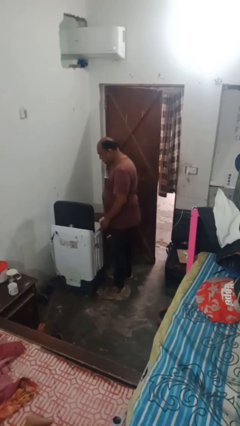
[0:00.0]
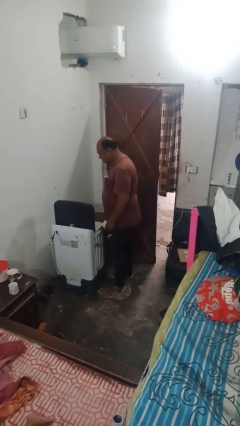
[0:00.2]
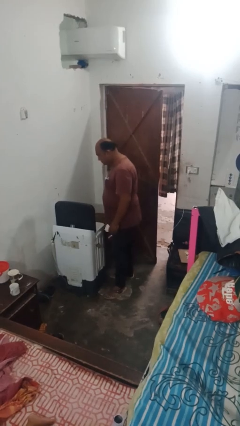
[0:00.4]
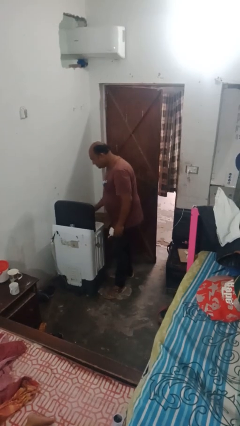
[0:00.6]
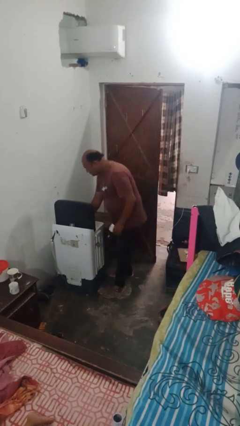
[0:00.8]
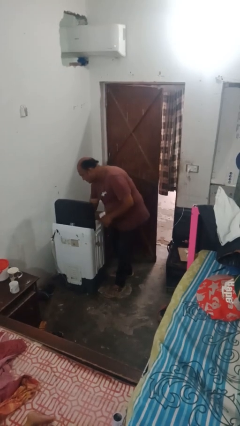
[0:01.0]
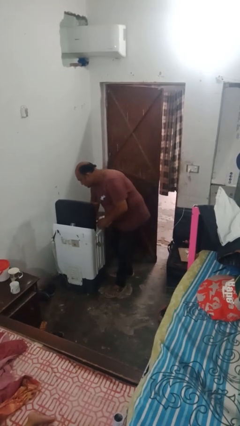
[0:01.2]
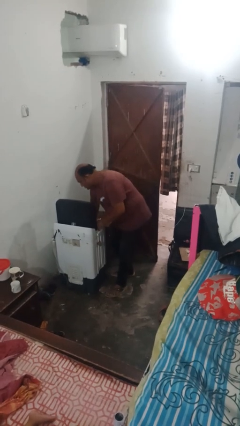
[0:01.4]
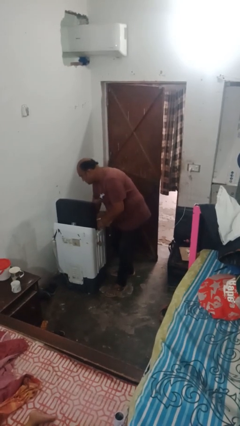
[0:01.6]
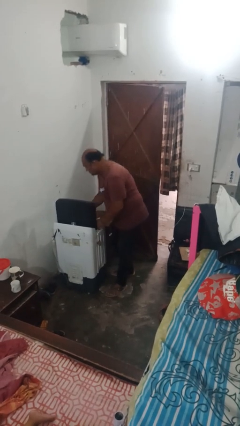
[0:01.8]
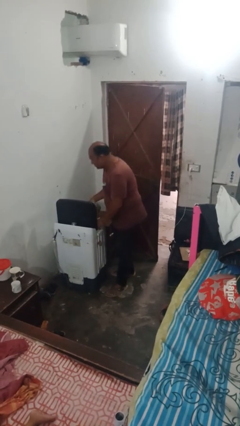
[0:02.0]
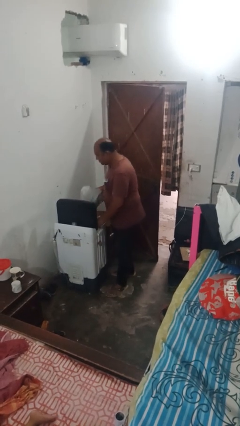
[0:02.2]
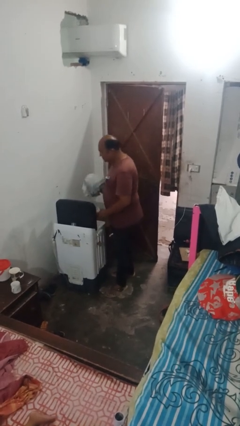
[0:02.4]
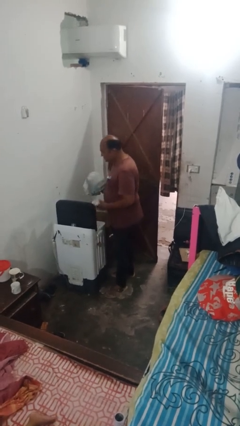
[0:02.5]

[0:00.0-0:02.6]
person unloads dryer

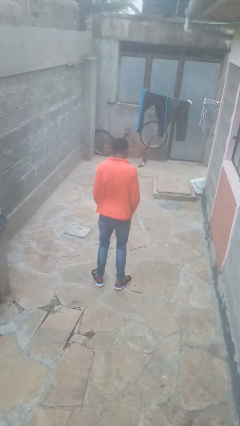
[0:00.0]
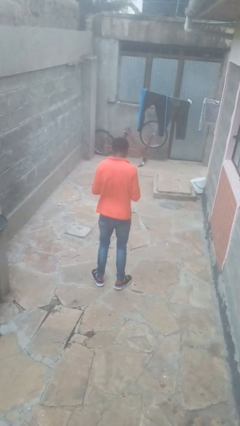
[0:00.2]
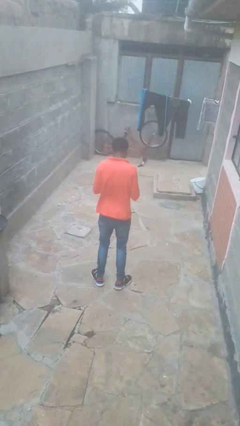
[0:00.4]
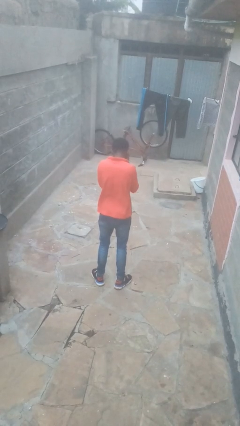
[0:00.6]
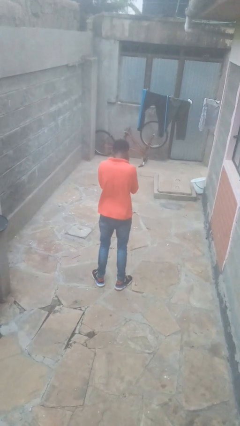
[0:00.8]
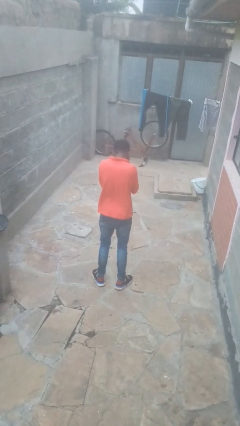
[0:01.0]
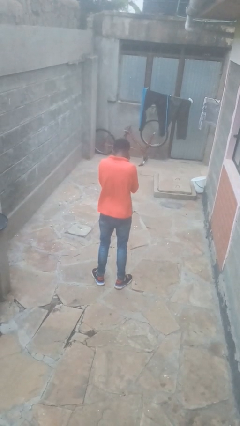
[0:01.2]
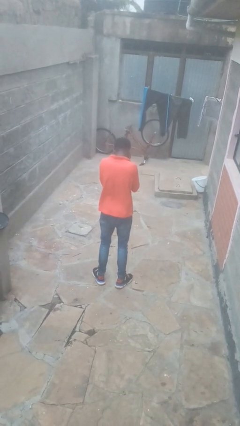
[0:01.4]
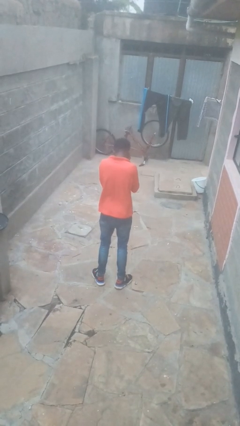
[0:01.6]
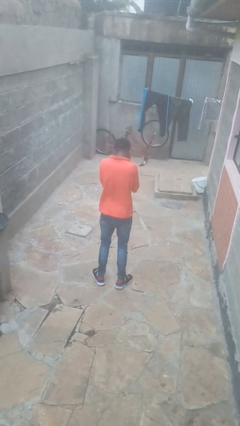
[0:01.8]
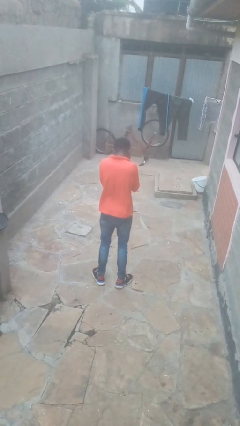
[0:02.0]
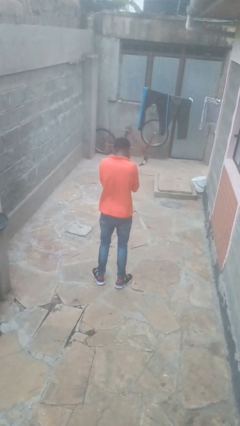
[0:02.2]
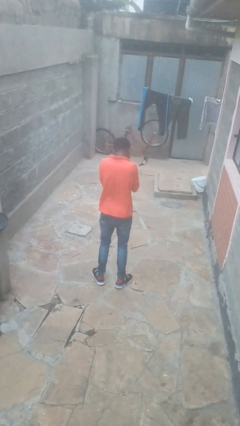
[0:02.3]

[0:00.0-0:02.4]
person covers face with hands

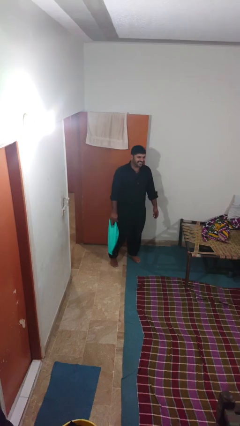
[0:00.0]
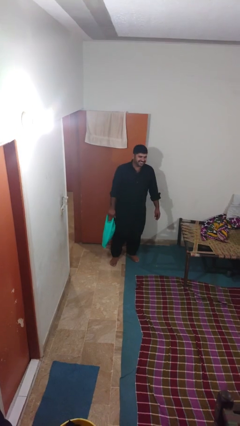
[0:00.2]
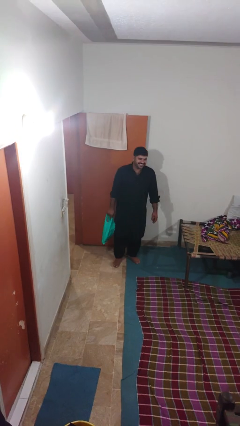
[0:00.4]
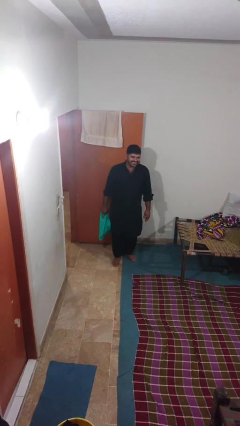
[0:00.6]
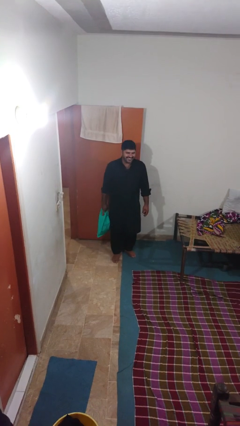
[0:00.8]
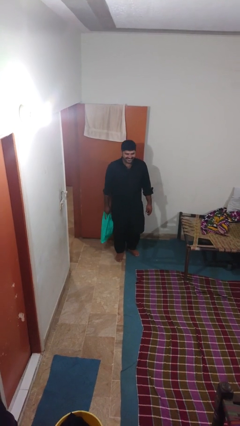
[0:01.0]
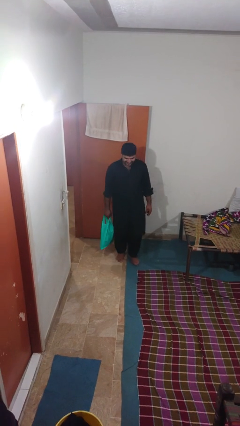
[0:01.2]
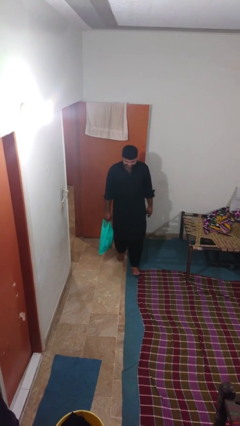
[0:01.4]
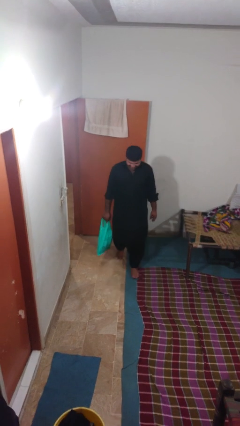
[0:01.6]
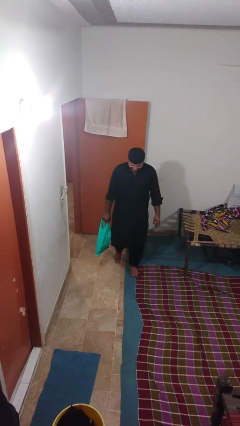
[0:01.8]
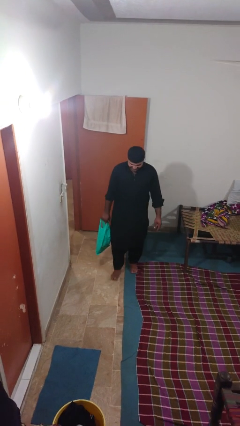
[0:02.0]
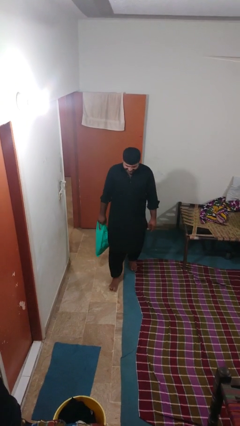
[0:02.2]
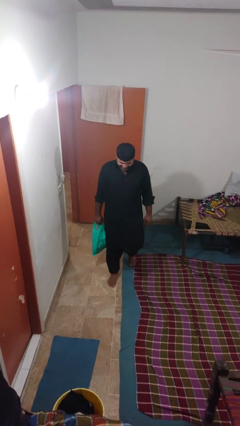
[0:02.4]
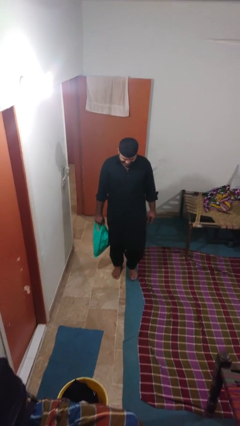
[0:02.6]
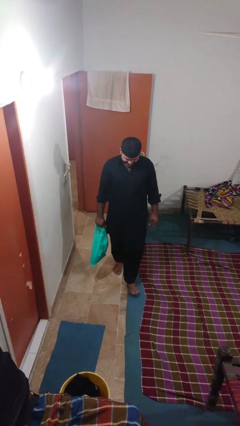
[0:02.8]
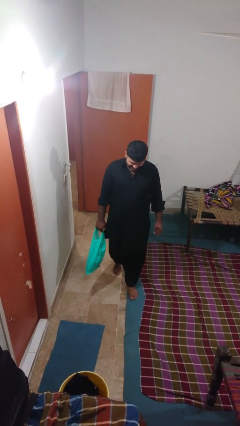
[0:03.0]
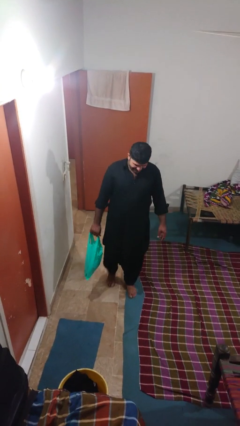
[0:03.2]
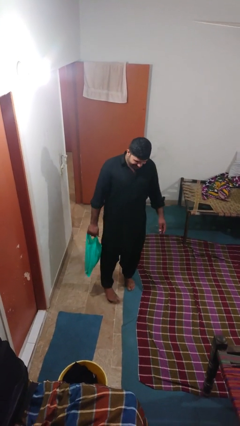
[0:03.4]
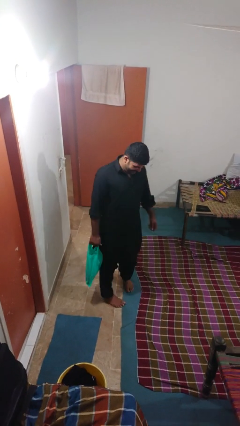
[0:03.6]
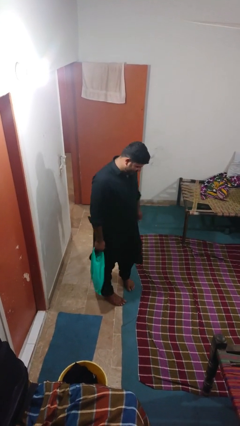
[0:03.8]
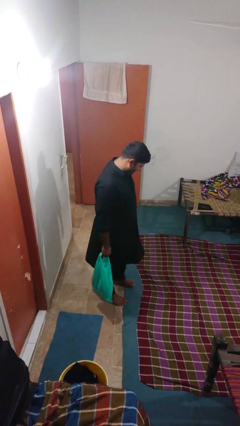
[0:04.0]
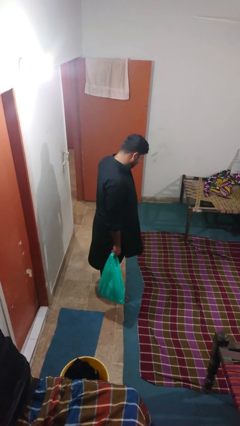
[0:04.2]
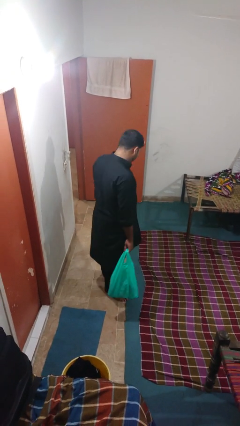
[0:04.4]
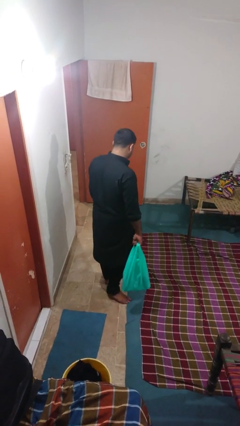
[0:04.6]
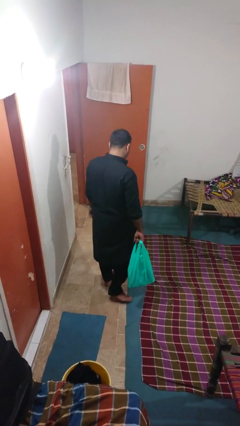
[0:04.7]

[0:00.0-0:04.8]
person carries groceries

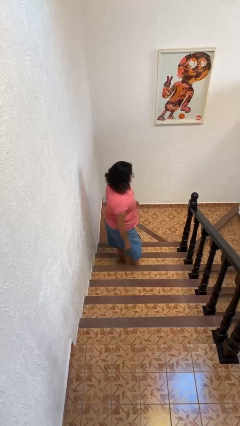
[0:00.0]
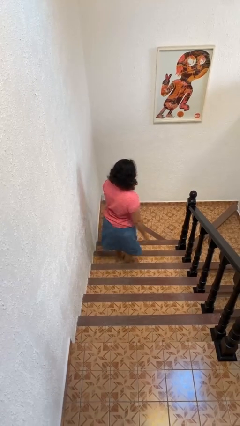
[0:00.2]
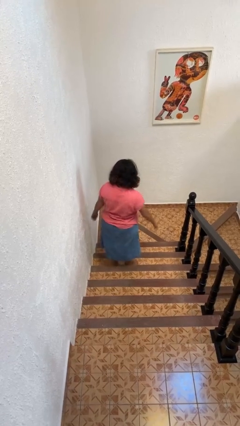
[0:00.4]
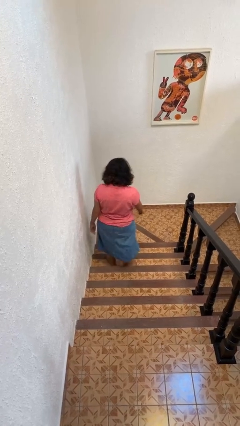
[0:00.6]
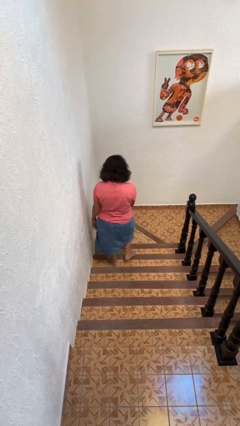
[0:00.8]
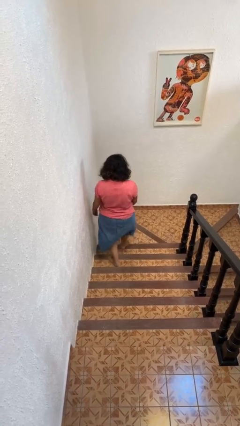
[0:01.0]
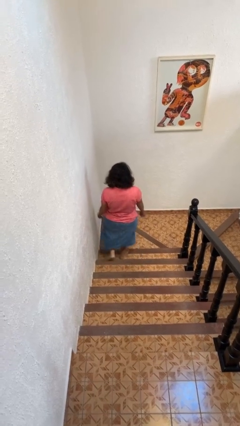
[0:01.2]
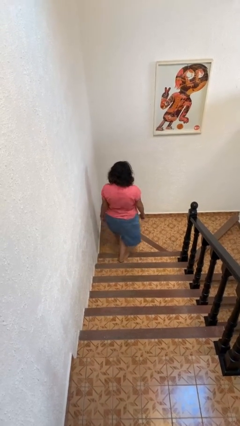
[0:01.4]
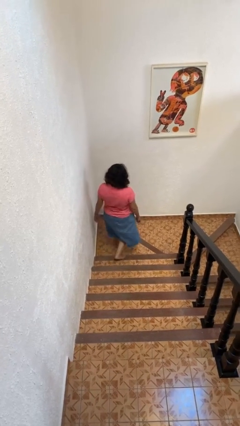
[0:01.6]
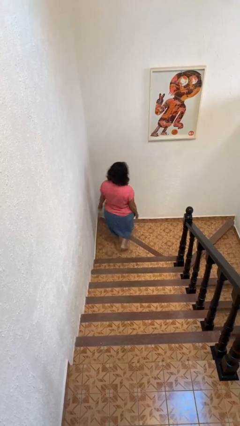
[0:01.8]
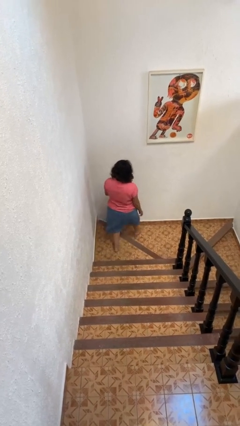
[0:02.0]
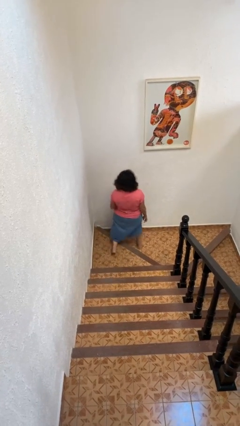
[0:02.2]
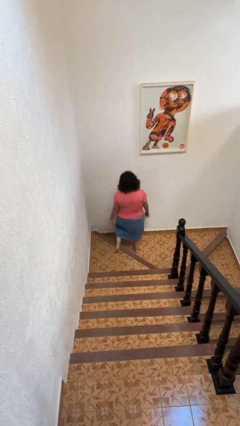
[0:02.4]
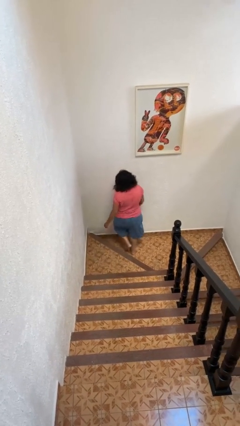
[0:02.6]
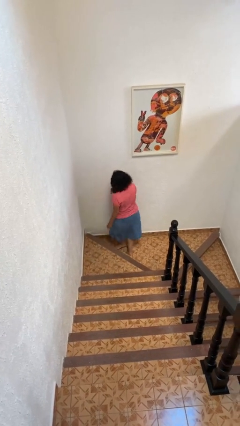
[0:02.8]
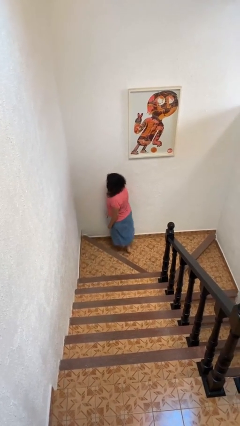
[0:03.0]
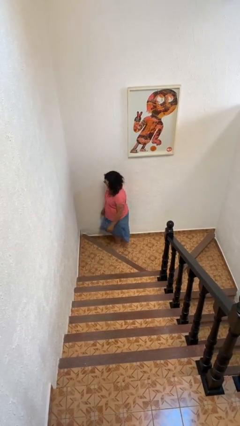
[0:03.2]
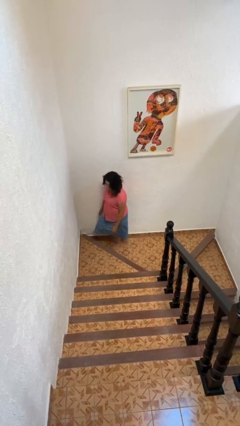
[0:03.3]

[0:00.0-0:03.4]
person climbs down stairs

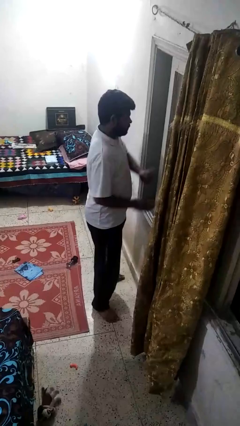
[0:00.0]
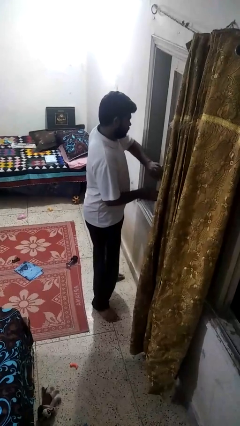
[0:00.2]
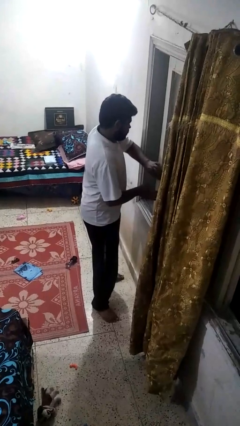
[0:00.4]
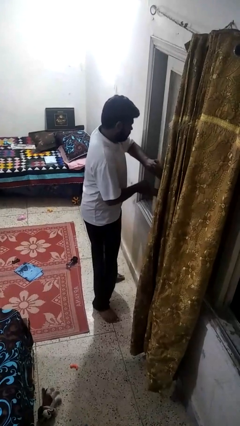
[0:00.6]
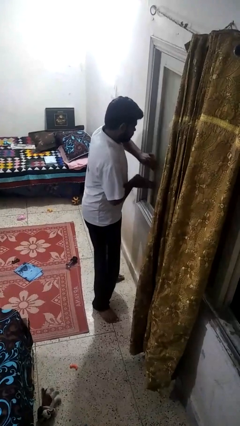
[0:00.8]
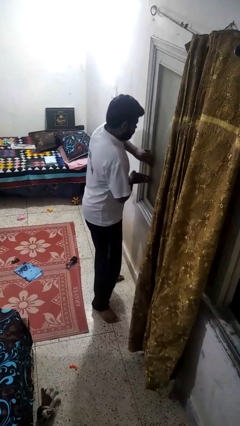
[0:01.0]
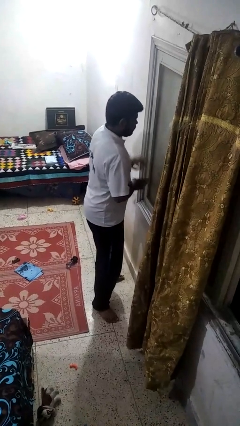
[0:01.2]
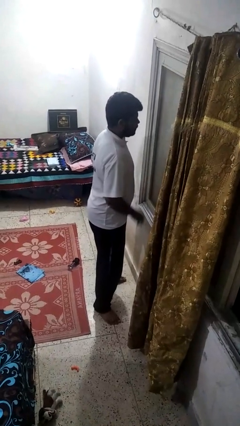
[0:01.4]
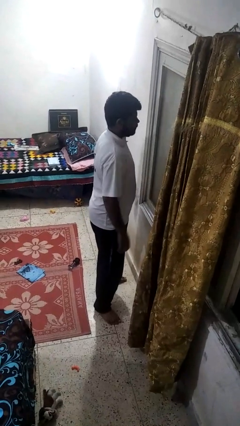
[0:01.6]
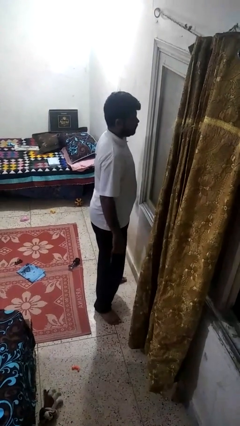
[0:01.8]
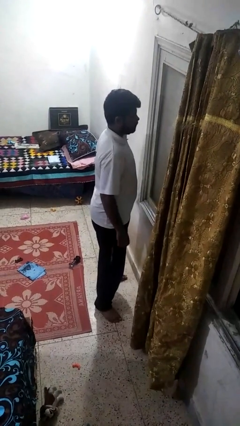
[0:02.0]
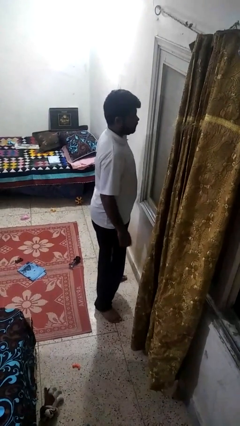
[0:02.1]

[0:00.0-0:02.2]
person closes sliding door

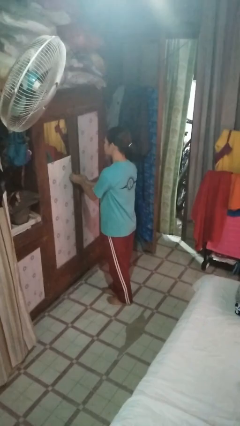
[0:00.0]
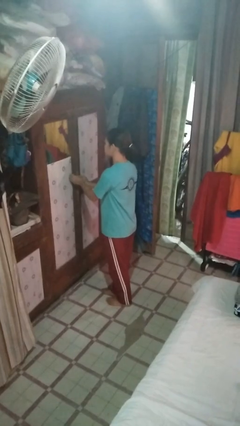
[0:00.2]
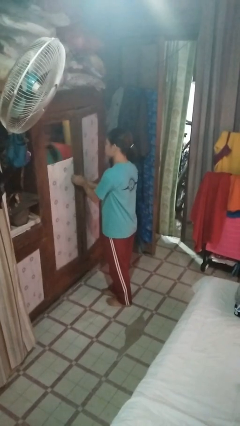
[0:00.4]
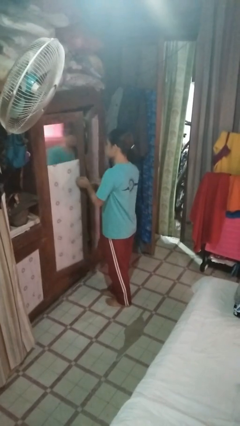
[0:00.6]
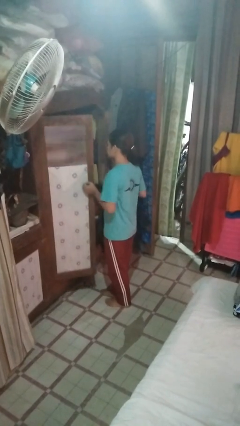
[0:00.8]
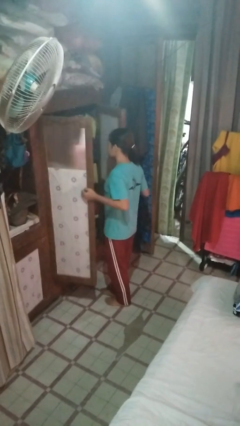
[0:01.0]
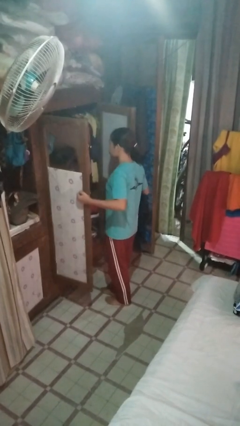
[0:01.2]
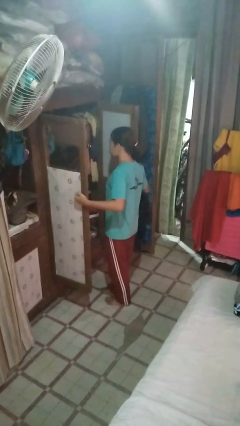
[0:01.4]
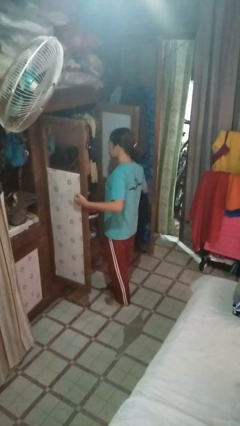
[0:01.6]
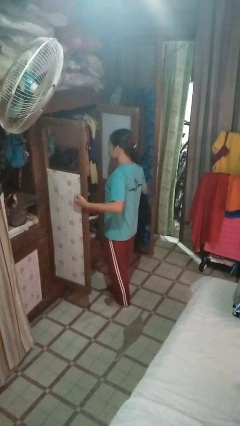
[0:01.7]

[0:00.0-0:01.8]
person opens closet door
